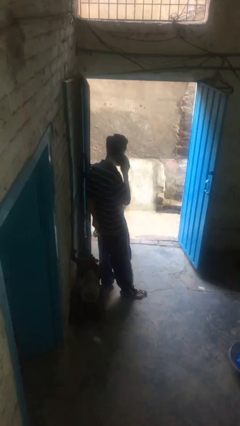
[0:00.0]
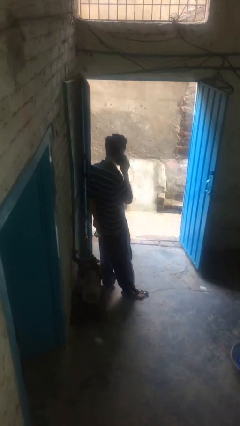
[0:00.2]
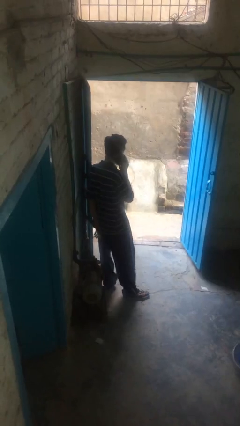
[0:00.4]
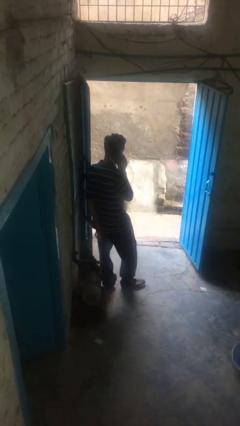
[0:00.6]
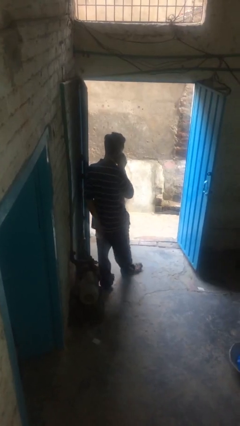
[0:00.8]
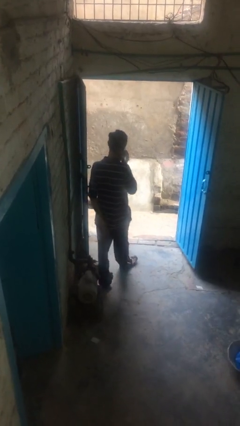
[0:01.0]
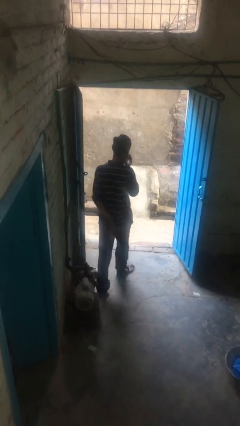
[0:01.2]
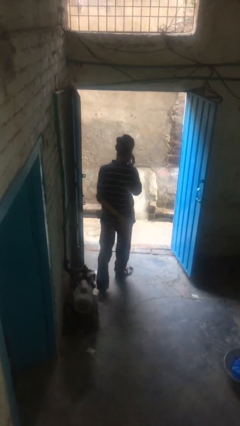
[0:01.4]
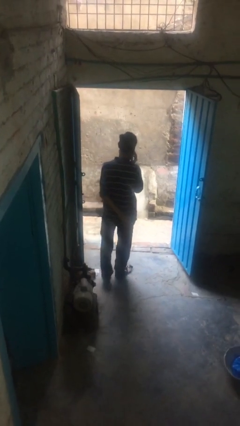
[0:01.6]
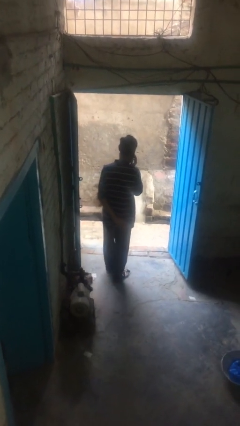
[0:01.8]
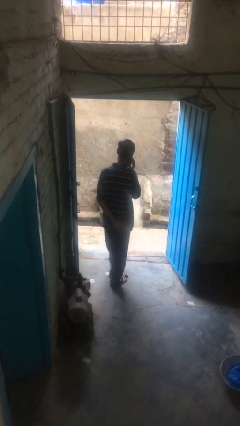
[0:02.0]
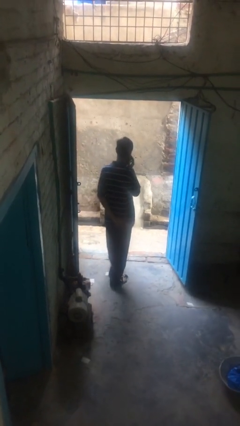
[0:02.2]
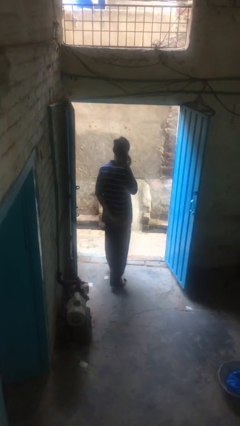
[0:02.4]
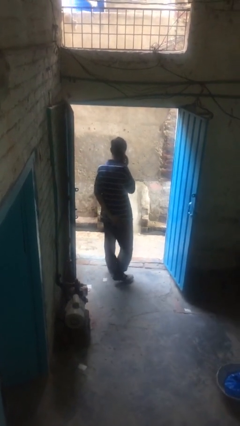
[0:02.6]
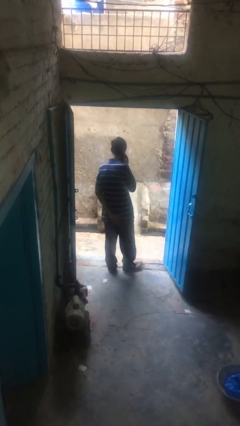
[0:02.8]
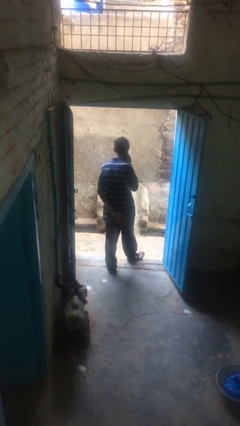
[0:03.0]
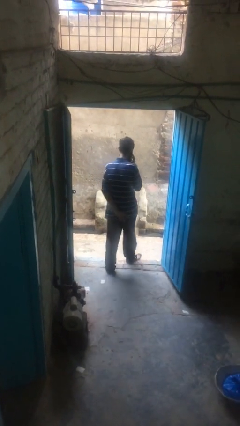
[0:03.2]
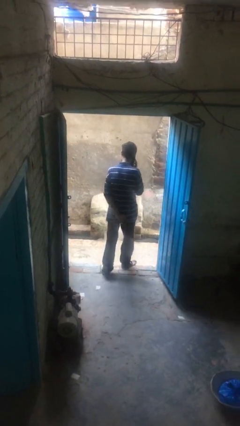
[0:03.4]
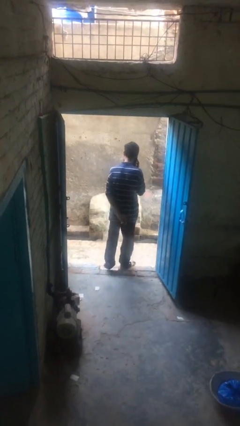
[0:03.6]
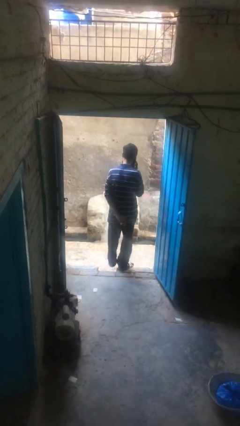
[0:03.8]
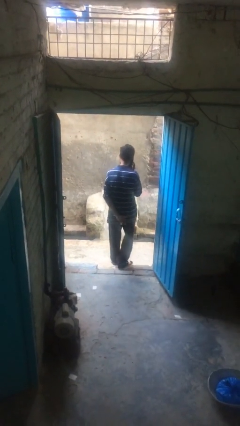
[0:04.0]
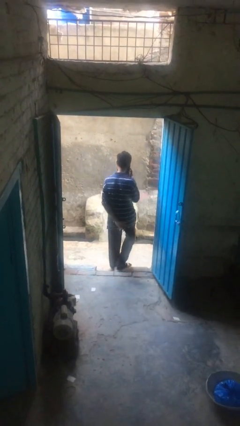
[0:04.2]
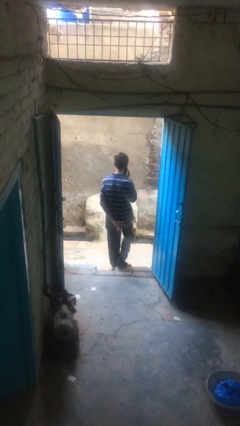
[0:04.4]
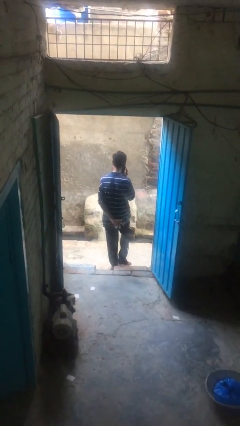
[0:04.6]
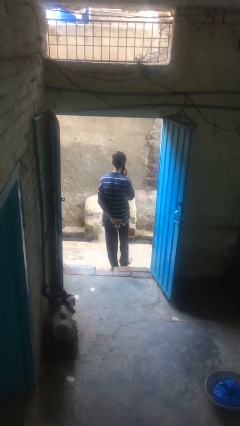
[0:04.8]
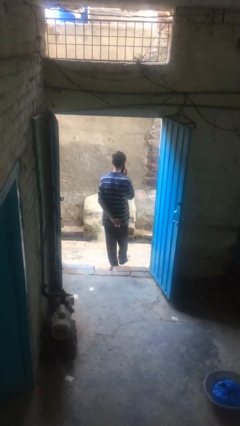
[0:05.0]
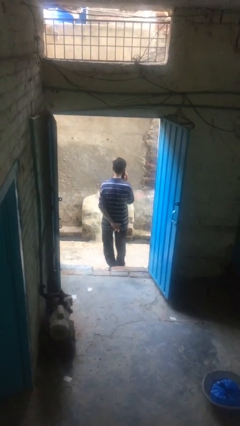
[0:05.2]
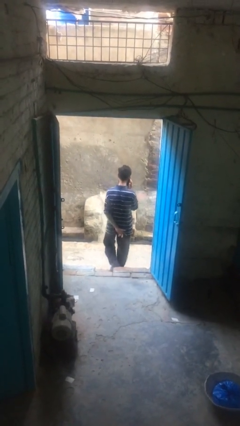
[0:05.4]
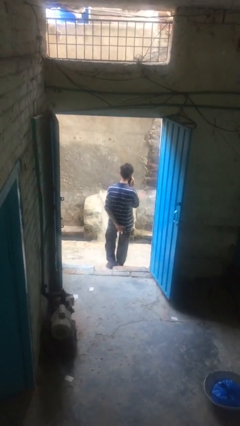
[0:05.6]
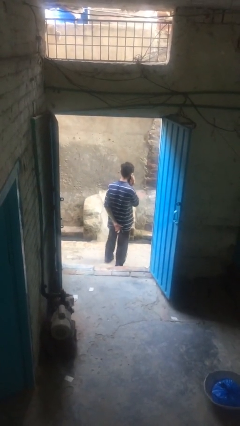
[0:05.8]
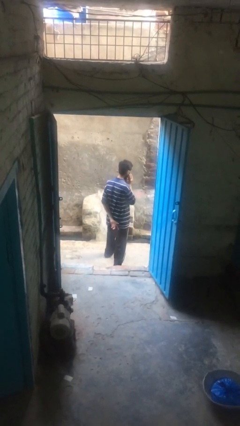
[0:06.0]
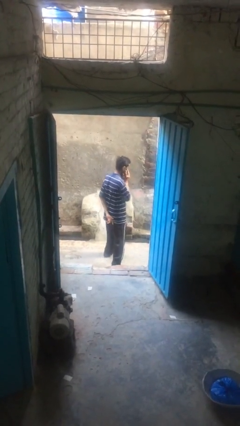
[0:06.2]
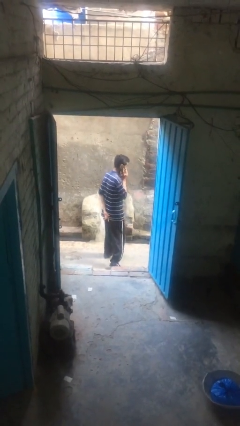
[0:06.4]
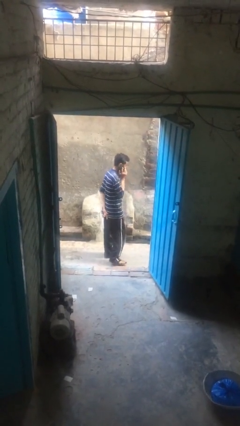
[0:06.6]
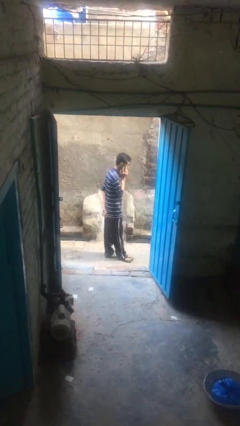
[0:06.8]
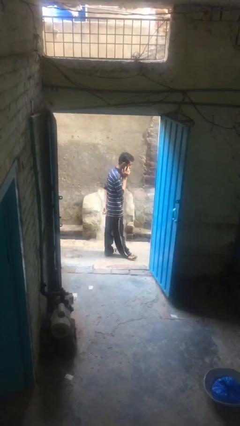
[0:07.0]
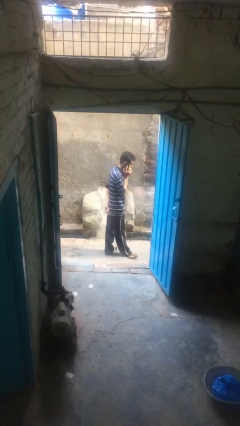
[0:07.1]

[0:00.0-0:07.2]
person exits scene through structure

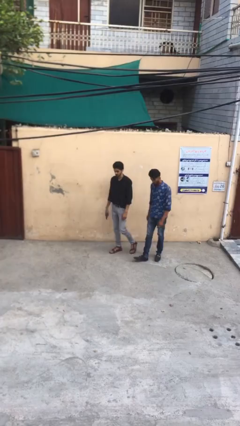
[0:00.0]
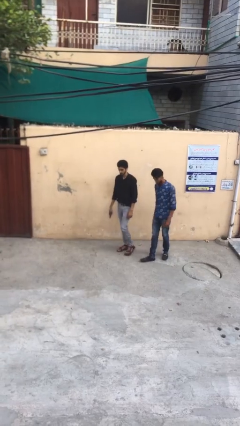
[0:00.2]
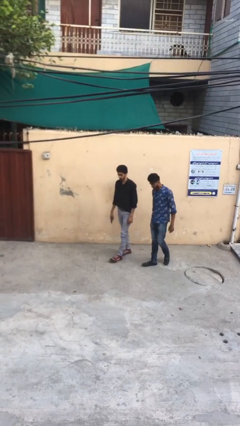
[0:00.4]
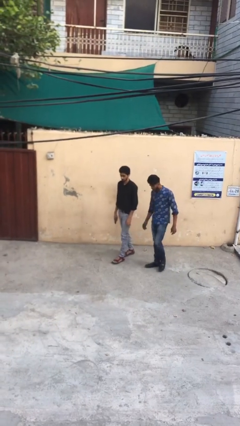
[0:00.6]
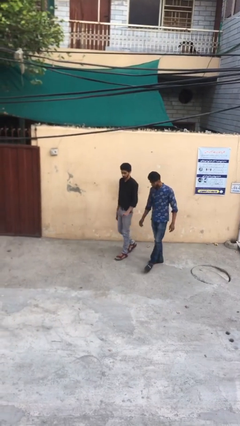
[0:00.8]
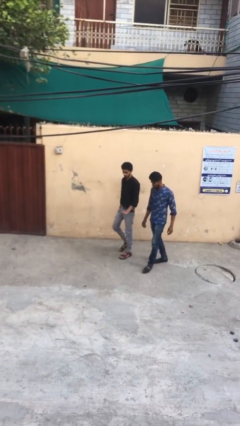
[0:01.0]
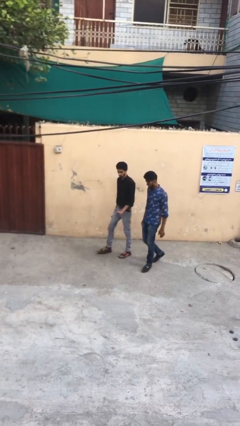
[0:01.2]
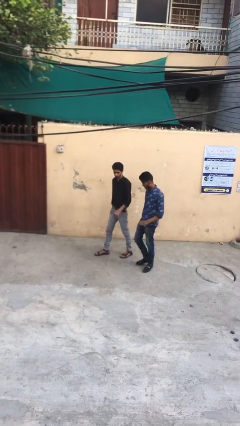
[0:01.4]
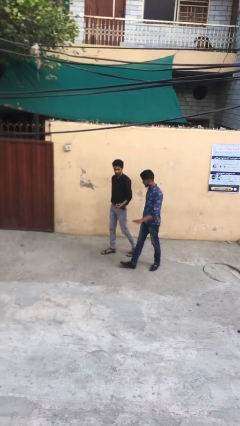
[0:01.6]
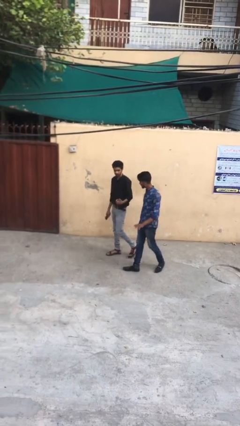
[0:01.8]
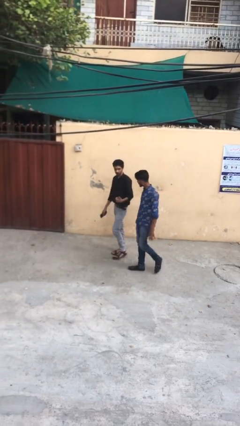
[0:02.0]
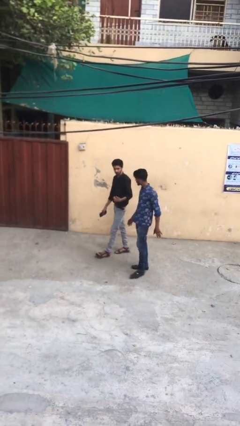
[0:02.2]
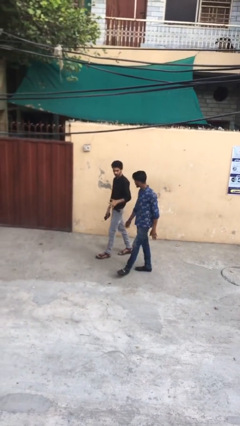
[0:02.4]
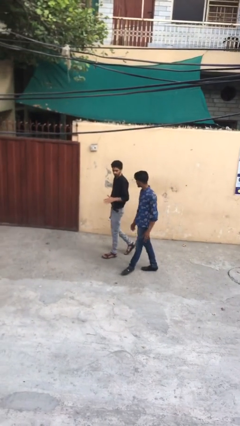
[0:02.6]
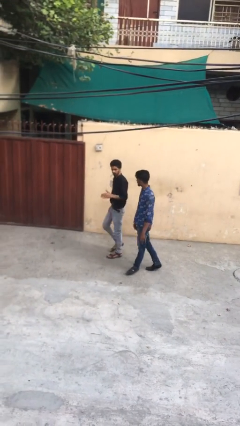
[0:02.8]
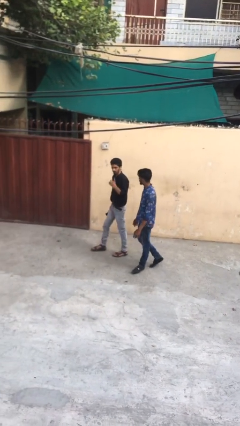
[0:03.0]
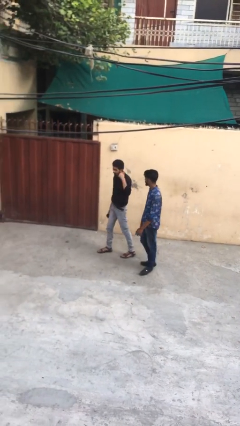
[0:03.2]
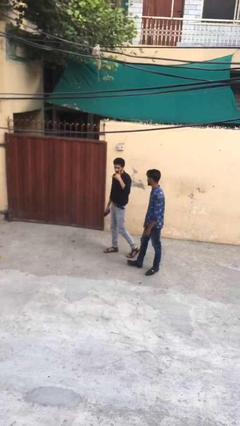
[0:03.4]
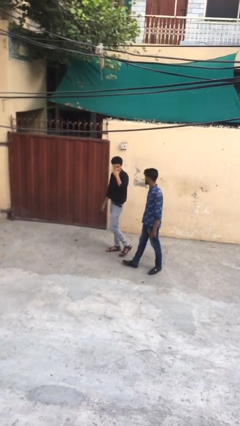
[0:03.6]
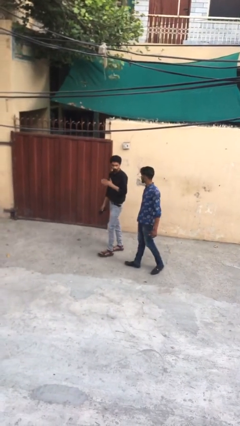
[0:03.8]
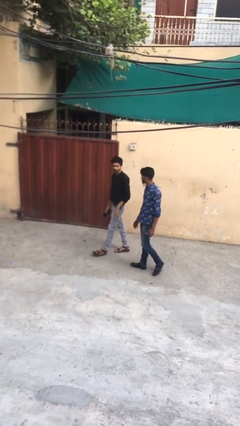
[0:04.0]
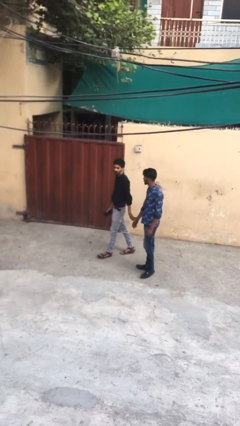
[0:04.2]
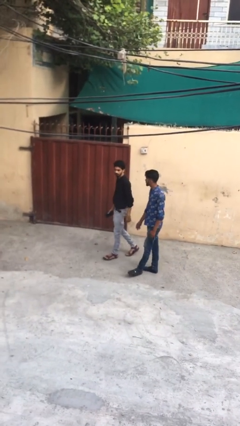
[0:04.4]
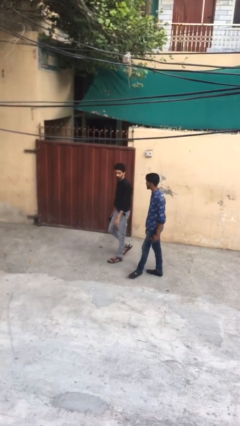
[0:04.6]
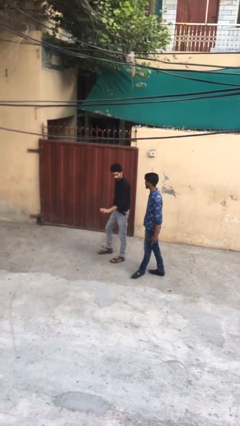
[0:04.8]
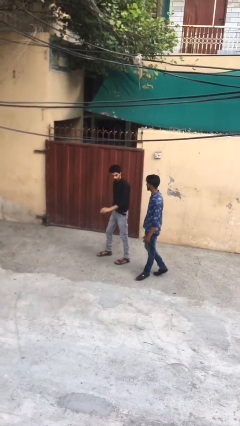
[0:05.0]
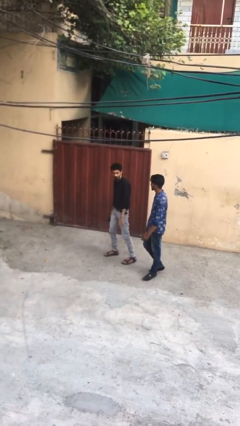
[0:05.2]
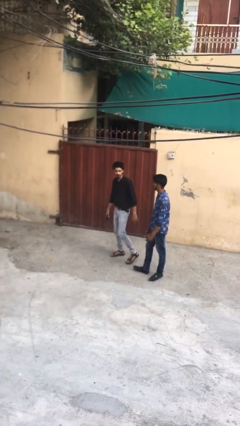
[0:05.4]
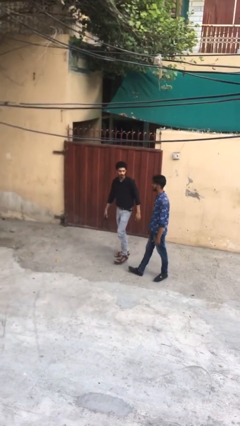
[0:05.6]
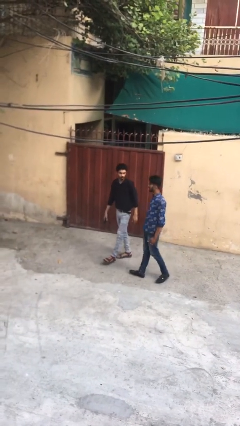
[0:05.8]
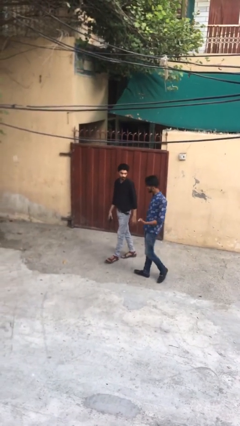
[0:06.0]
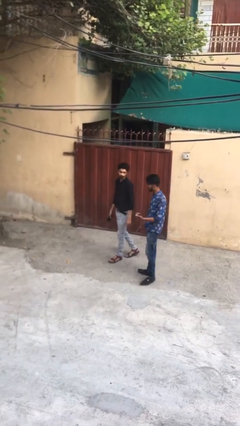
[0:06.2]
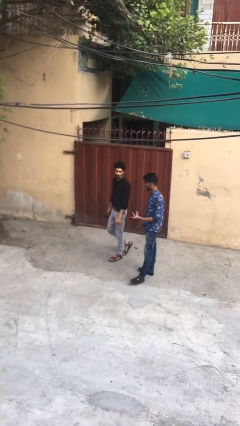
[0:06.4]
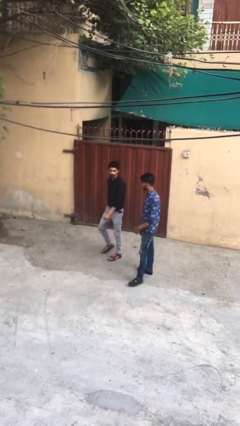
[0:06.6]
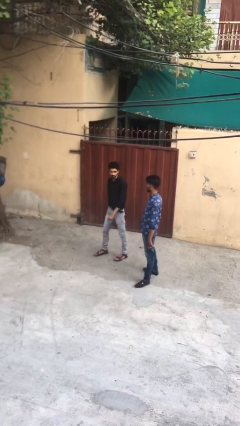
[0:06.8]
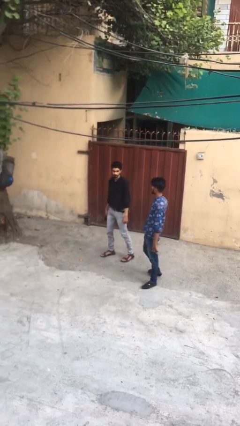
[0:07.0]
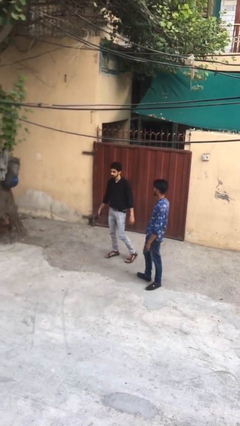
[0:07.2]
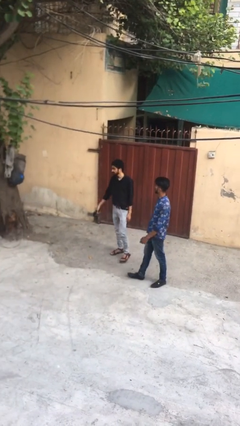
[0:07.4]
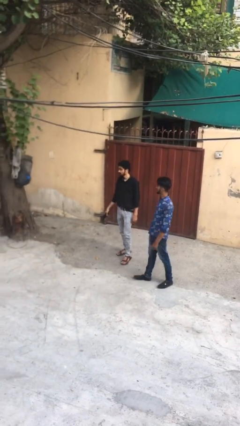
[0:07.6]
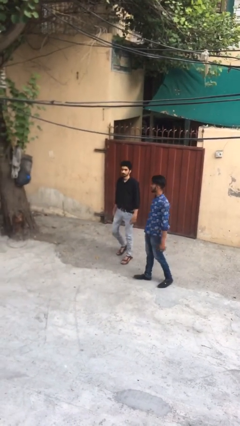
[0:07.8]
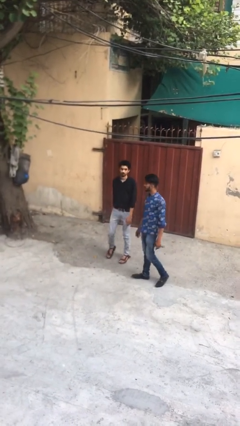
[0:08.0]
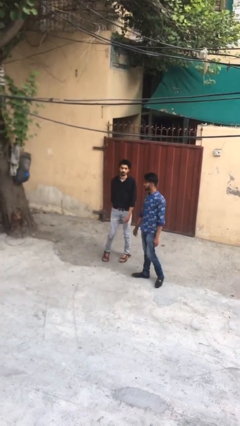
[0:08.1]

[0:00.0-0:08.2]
person talks to person

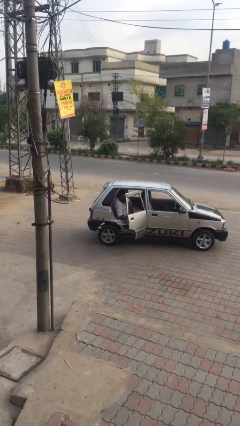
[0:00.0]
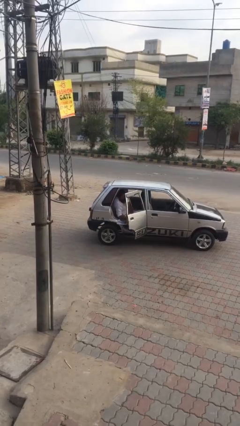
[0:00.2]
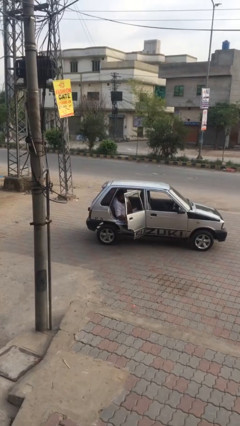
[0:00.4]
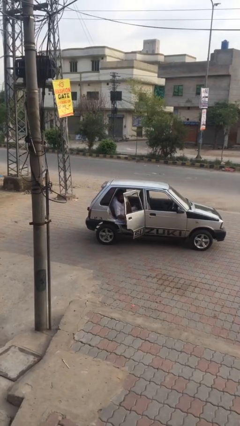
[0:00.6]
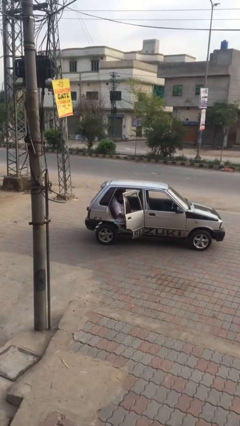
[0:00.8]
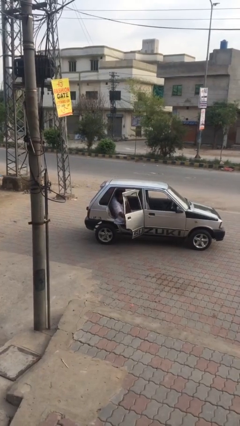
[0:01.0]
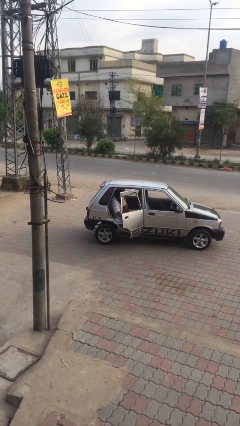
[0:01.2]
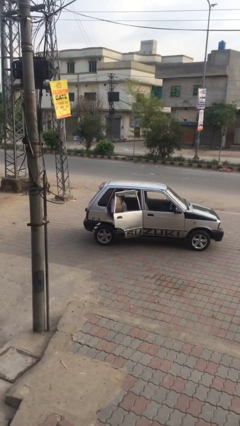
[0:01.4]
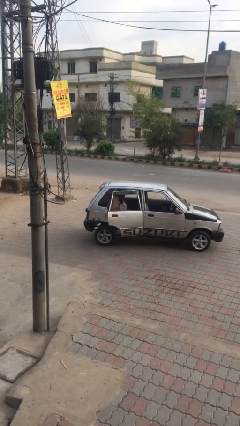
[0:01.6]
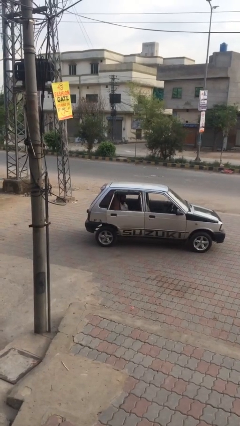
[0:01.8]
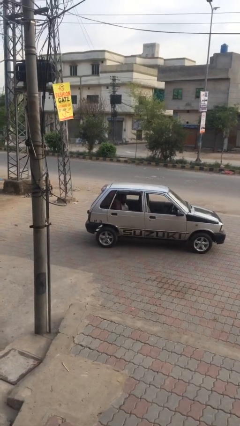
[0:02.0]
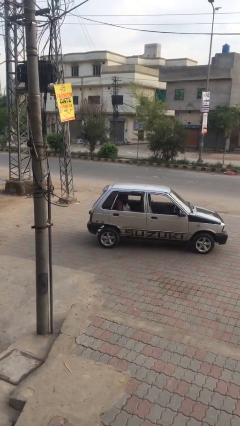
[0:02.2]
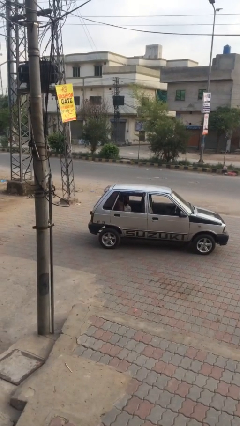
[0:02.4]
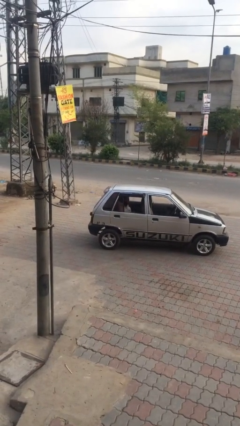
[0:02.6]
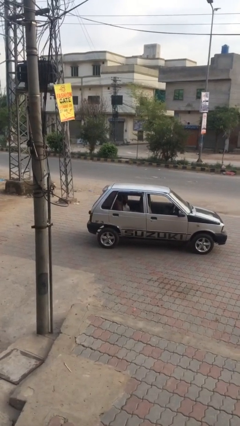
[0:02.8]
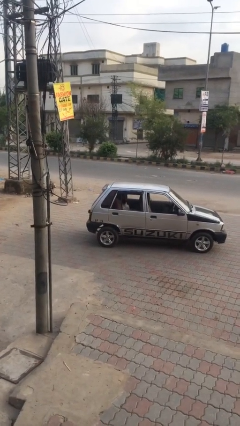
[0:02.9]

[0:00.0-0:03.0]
person closes car door
